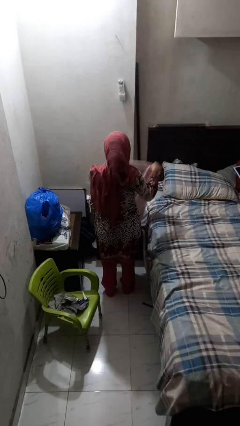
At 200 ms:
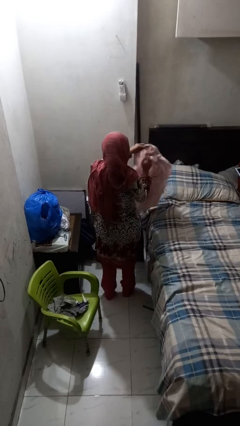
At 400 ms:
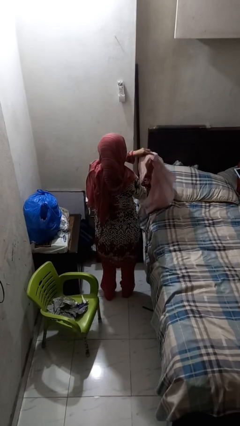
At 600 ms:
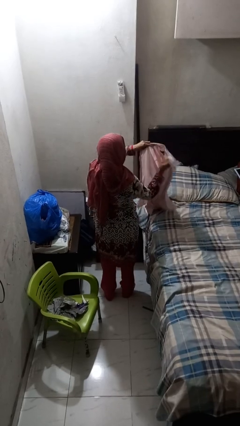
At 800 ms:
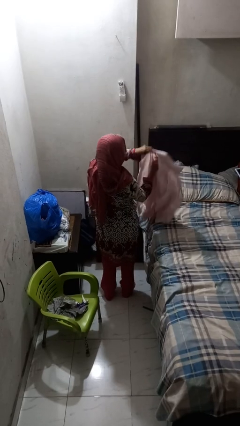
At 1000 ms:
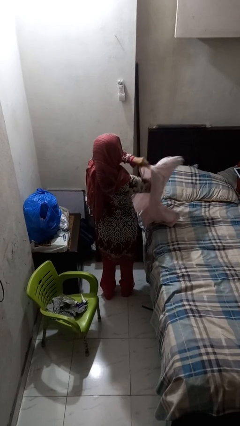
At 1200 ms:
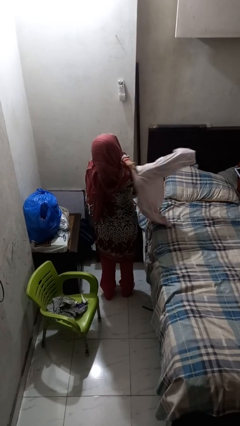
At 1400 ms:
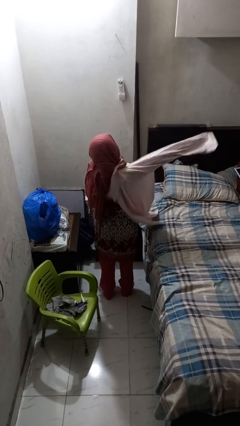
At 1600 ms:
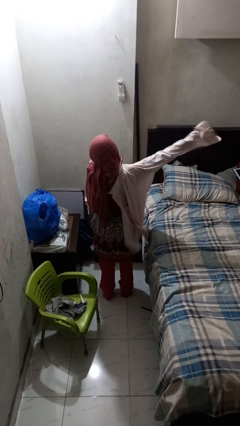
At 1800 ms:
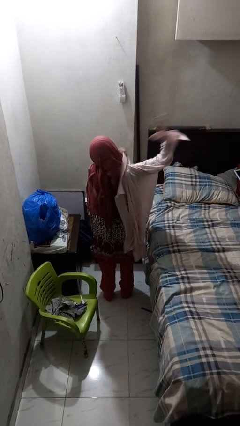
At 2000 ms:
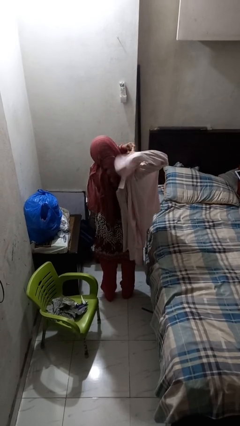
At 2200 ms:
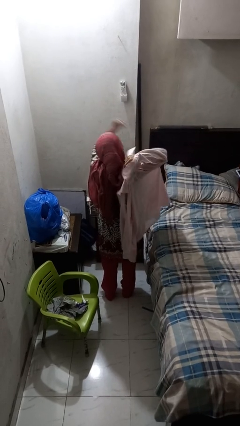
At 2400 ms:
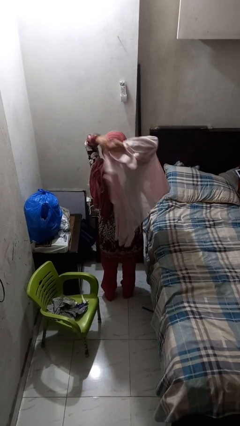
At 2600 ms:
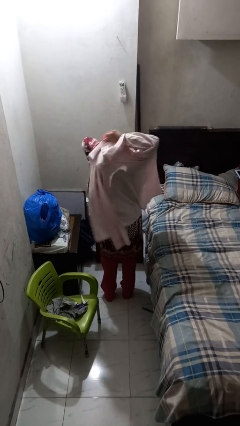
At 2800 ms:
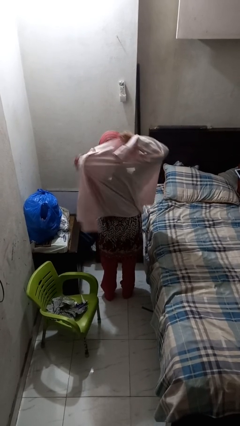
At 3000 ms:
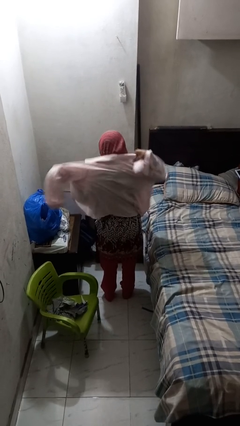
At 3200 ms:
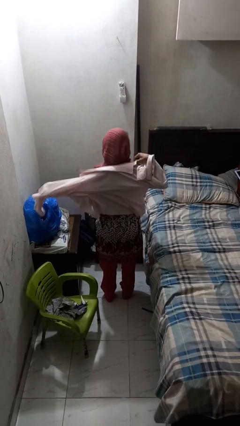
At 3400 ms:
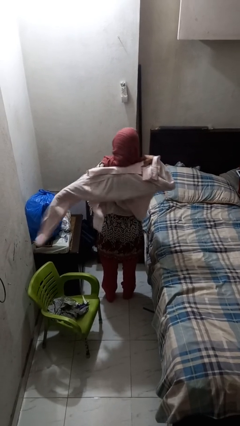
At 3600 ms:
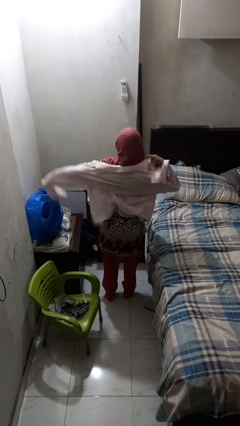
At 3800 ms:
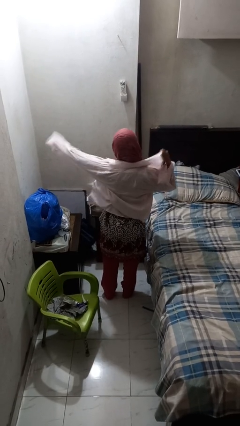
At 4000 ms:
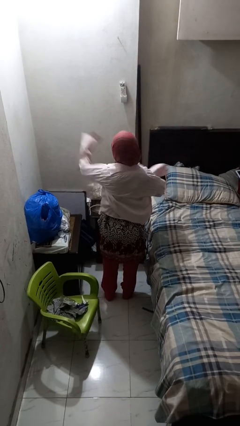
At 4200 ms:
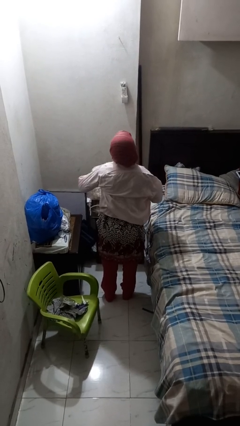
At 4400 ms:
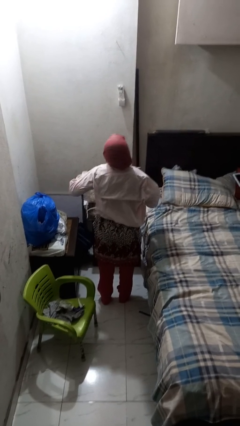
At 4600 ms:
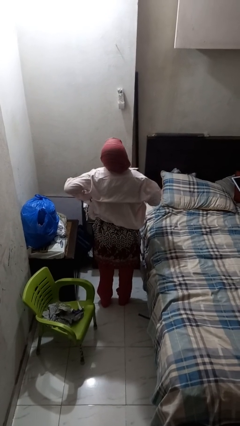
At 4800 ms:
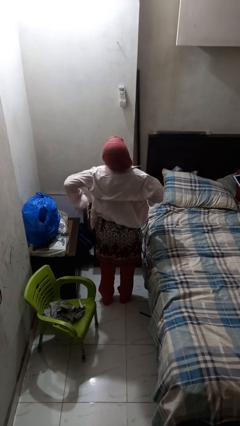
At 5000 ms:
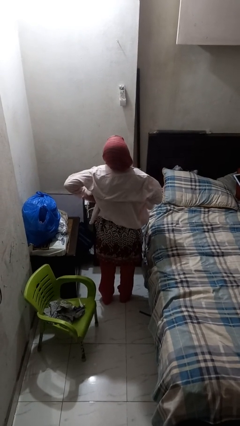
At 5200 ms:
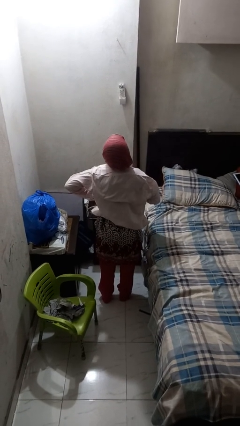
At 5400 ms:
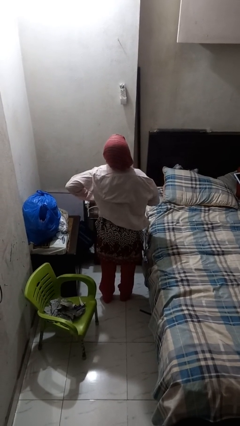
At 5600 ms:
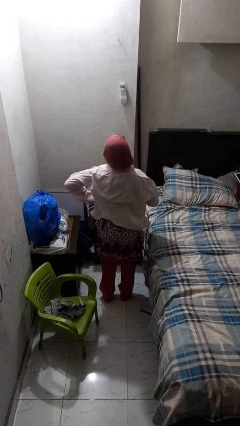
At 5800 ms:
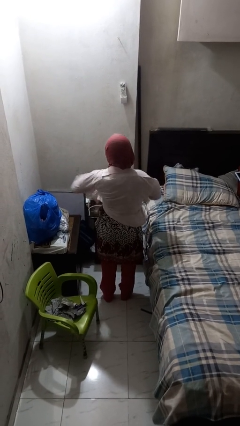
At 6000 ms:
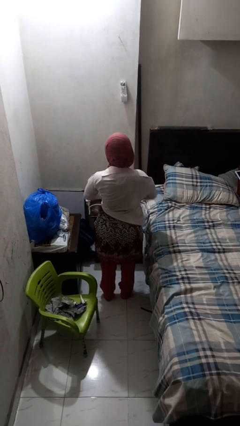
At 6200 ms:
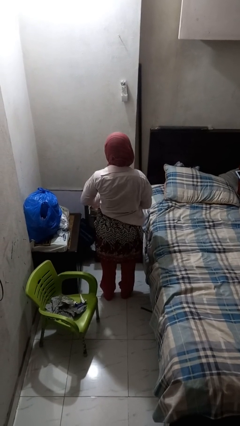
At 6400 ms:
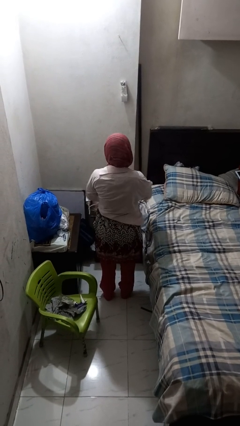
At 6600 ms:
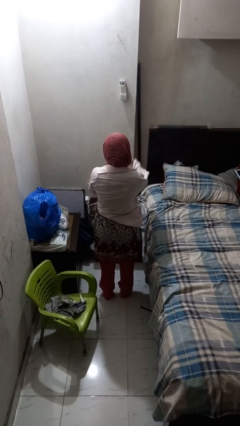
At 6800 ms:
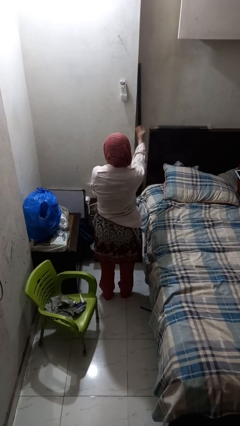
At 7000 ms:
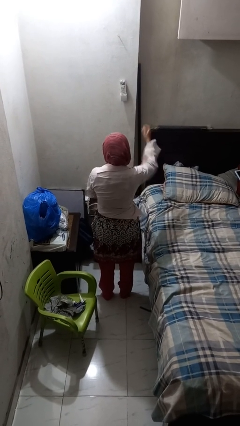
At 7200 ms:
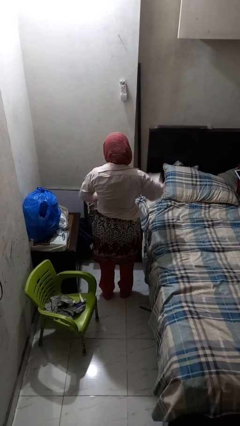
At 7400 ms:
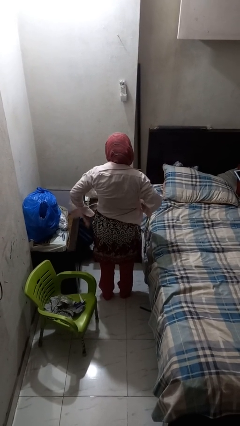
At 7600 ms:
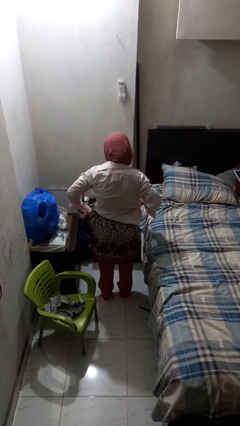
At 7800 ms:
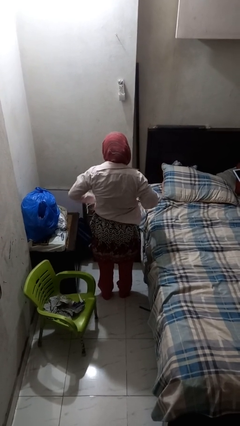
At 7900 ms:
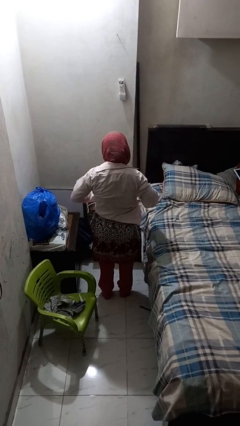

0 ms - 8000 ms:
person puts on shirt

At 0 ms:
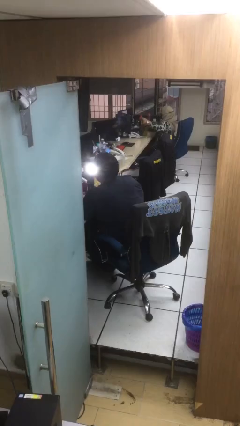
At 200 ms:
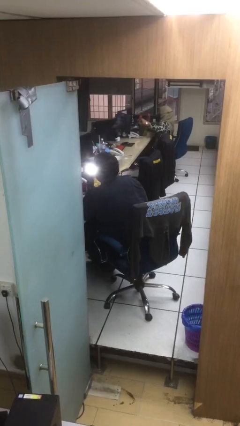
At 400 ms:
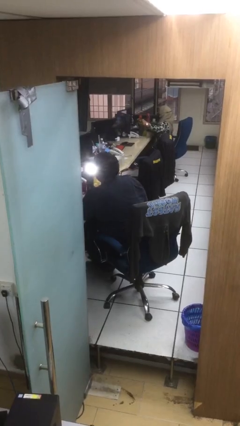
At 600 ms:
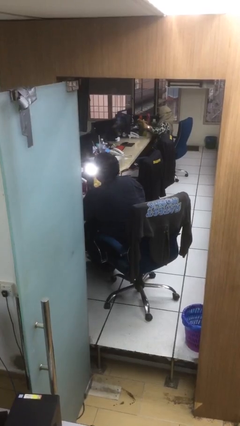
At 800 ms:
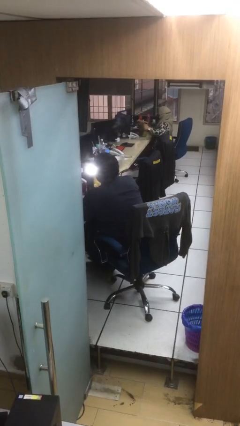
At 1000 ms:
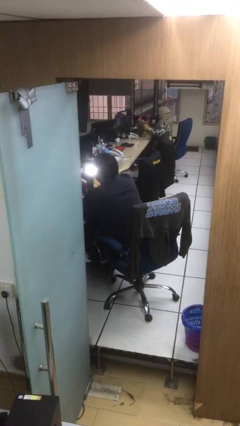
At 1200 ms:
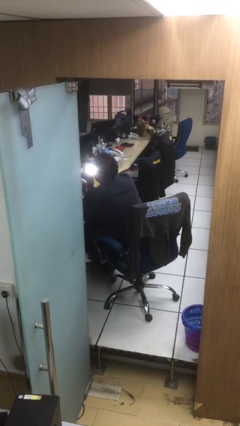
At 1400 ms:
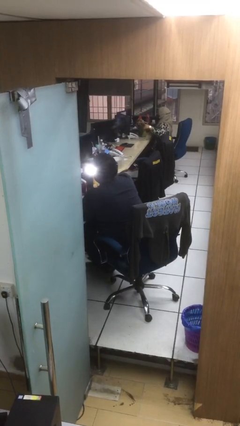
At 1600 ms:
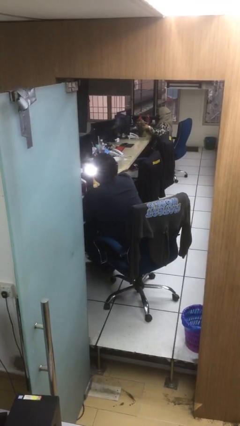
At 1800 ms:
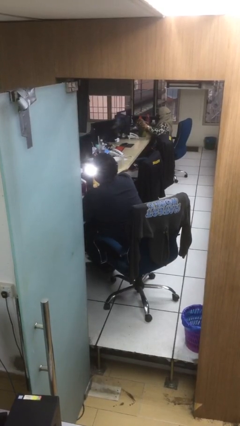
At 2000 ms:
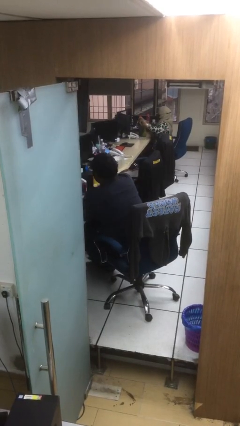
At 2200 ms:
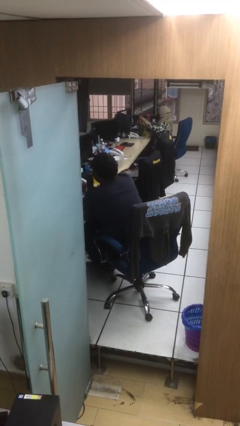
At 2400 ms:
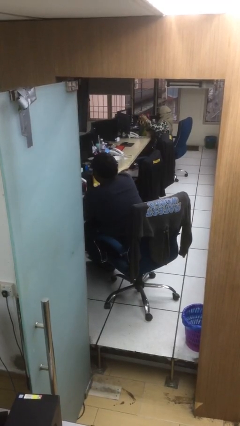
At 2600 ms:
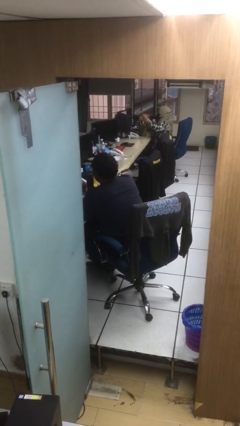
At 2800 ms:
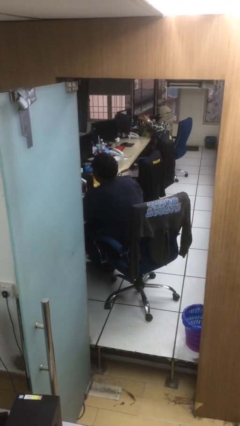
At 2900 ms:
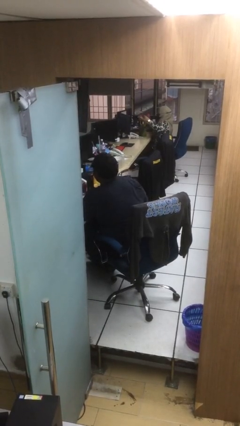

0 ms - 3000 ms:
person turns off lamp

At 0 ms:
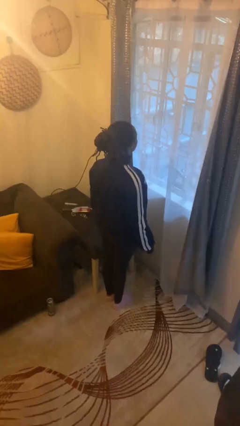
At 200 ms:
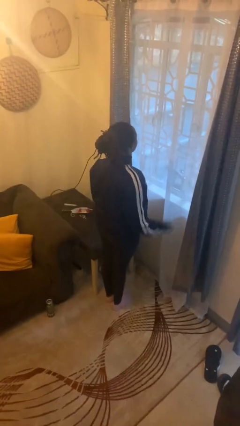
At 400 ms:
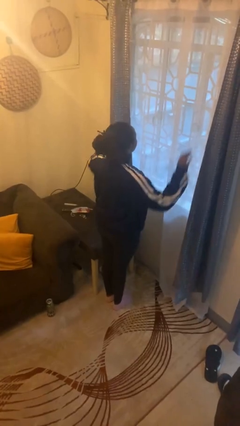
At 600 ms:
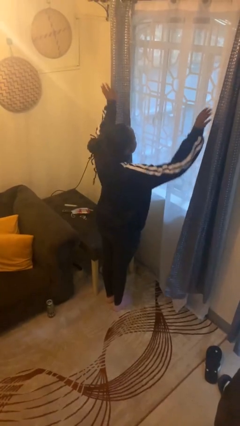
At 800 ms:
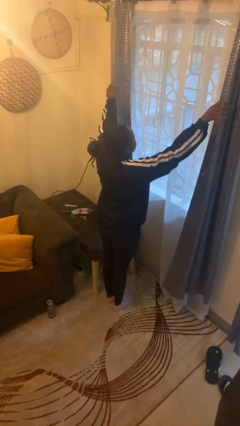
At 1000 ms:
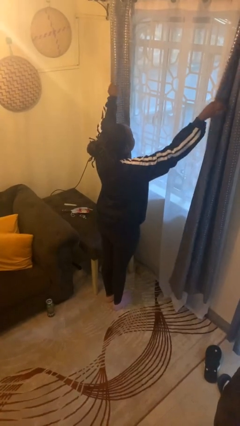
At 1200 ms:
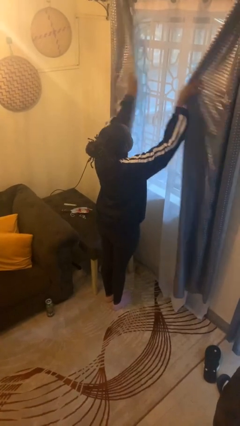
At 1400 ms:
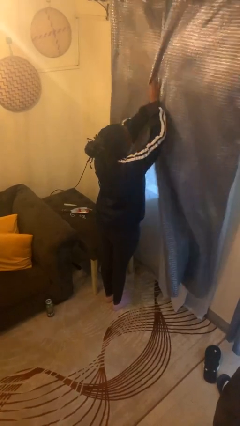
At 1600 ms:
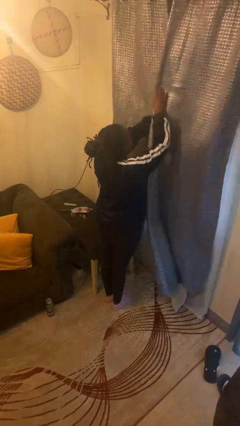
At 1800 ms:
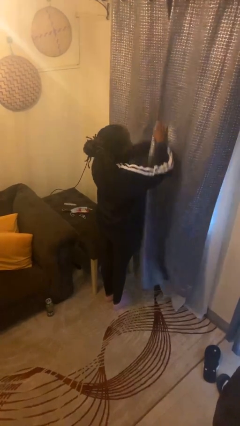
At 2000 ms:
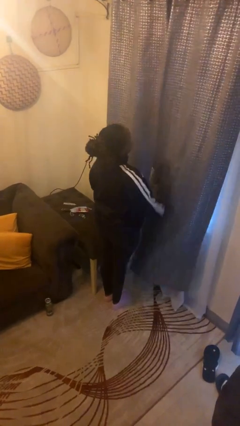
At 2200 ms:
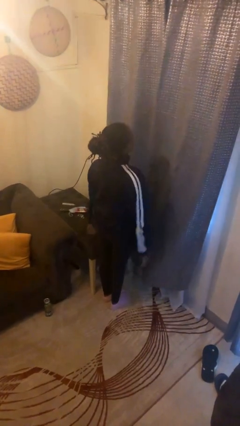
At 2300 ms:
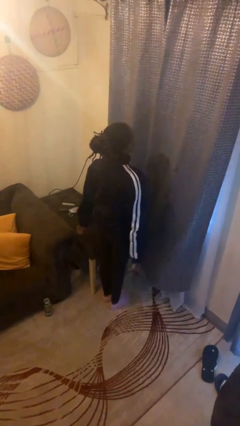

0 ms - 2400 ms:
person closes curtains

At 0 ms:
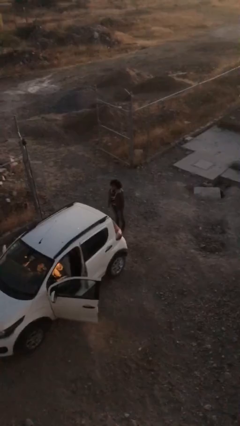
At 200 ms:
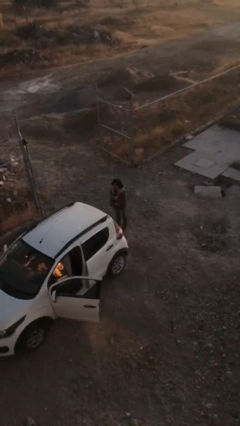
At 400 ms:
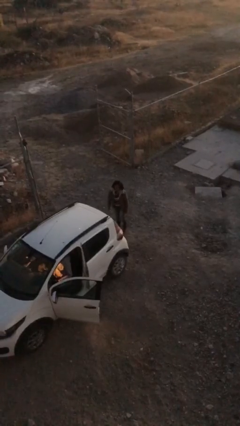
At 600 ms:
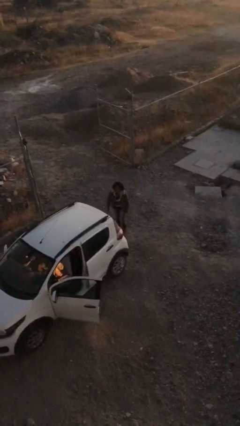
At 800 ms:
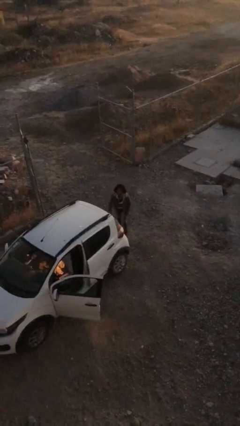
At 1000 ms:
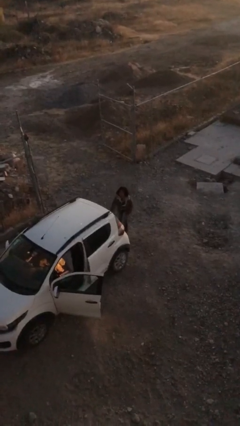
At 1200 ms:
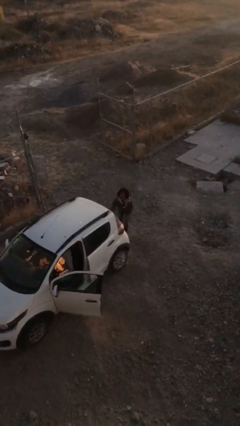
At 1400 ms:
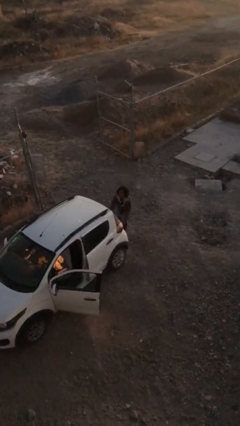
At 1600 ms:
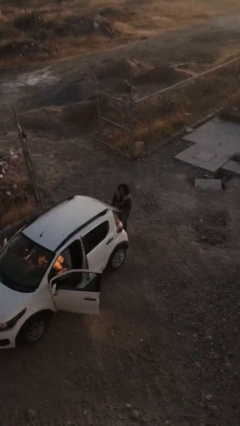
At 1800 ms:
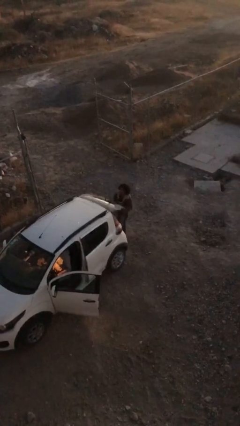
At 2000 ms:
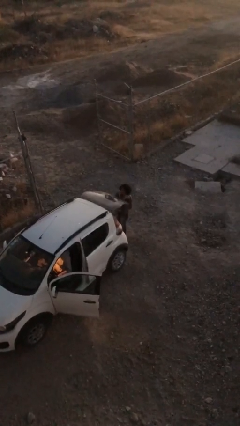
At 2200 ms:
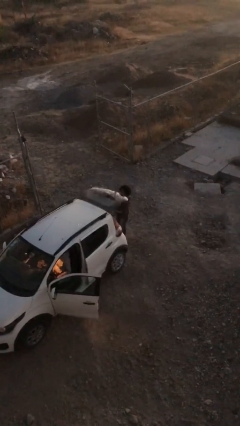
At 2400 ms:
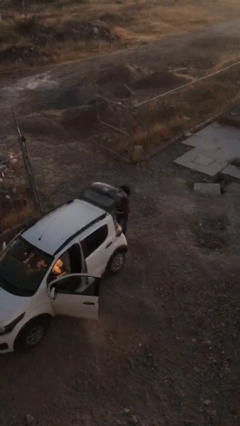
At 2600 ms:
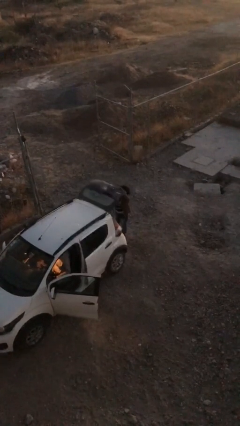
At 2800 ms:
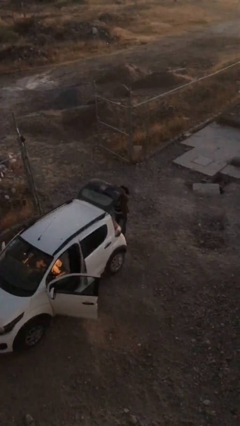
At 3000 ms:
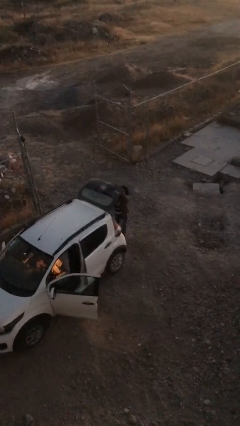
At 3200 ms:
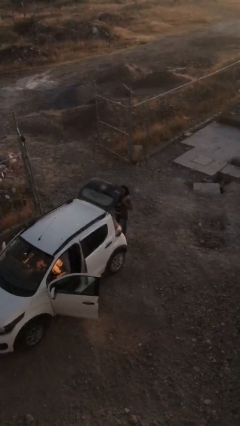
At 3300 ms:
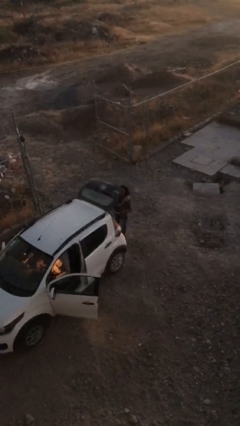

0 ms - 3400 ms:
person opens car trunk

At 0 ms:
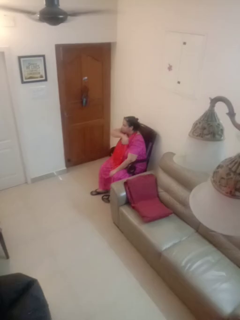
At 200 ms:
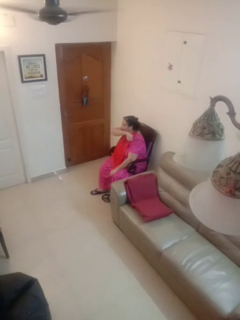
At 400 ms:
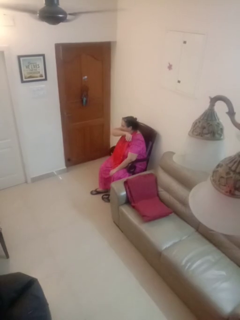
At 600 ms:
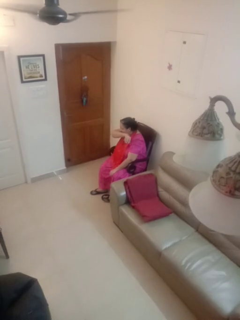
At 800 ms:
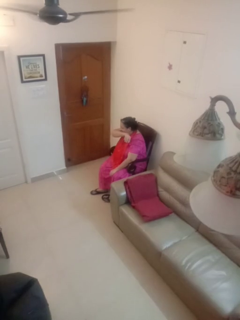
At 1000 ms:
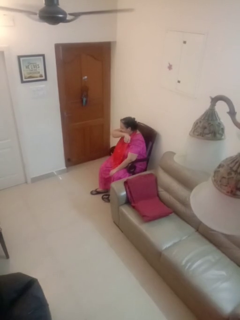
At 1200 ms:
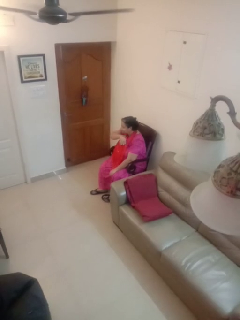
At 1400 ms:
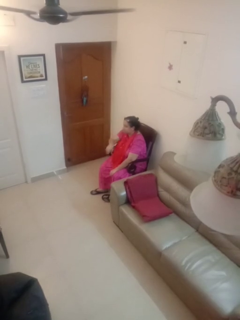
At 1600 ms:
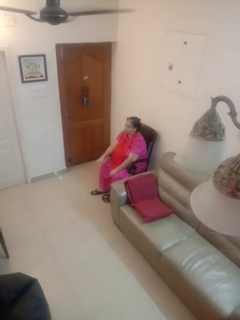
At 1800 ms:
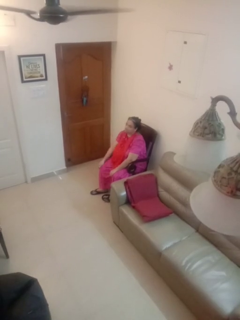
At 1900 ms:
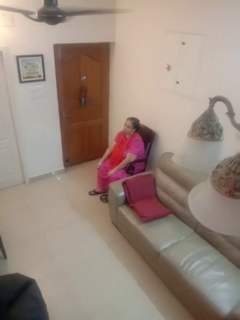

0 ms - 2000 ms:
person sneezes into arm
